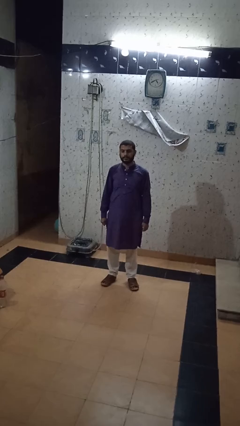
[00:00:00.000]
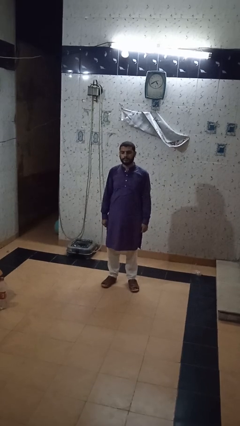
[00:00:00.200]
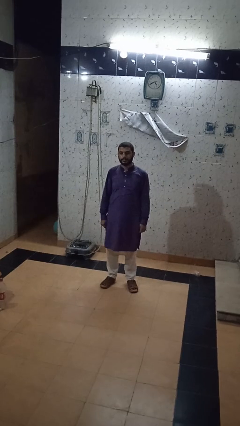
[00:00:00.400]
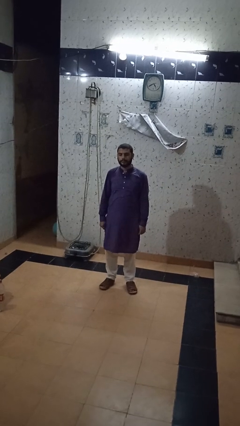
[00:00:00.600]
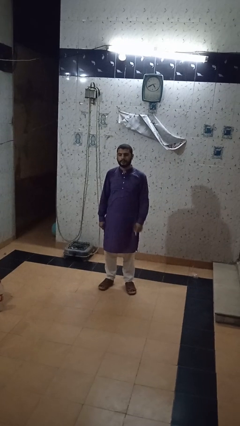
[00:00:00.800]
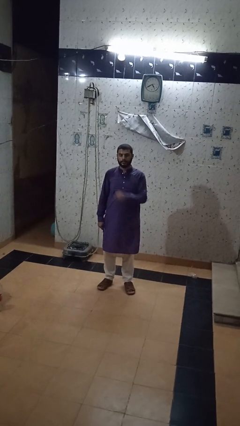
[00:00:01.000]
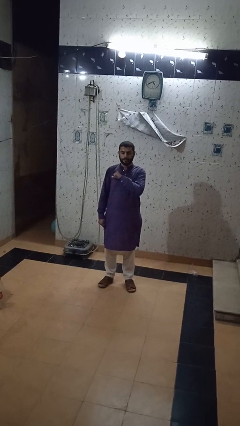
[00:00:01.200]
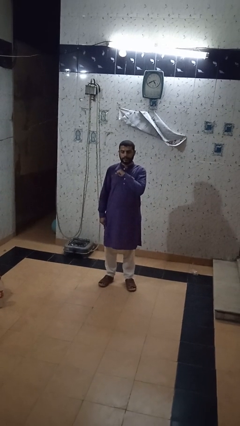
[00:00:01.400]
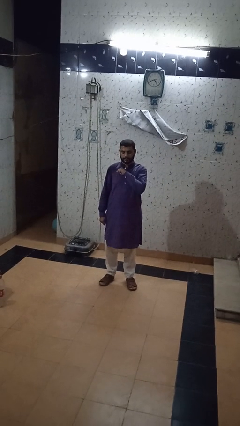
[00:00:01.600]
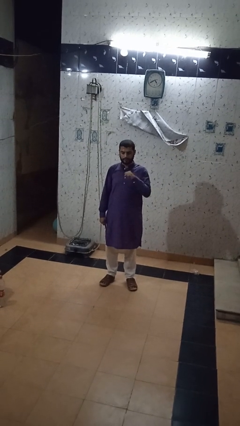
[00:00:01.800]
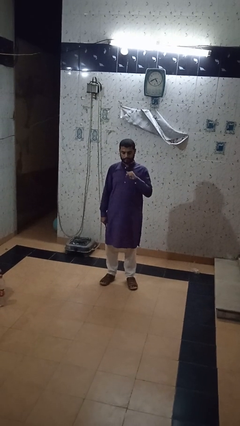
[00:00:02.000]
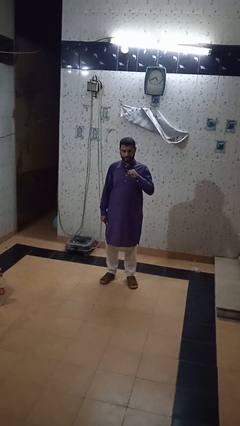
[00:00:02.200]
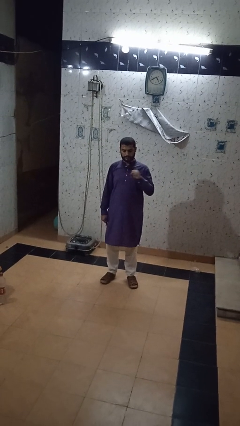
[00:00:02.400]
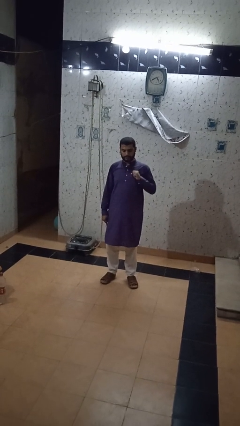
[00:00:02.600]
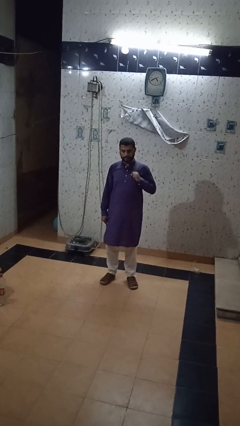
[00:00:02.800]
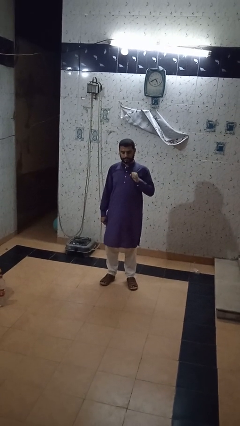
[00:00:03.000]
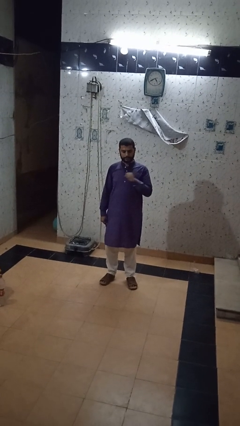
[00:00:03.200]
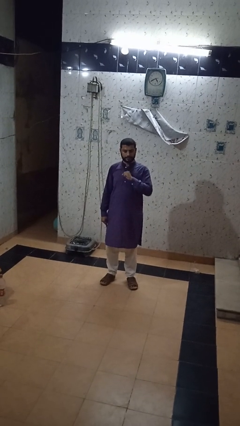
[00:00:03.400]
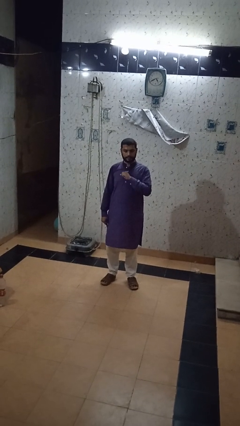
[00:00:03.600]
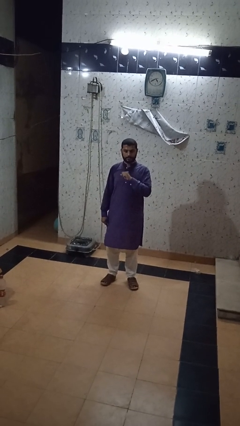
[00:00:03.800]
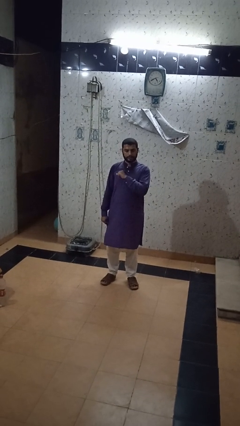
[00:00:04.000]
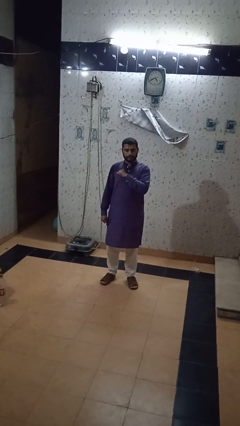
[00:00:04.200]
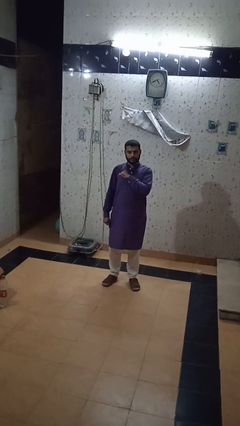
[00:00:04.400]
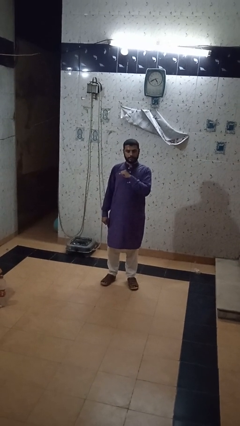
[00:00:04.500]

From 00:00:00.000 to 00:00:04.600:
person drums on chest

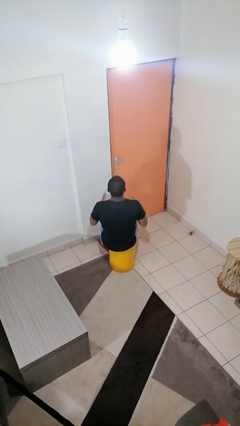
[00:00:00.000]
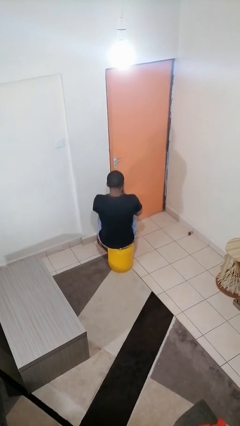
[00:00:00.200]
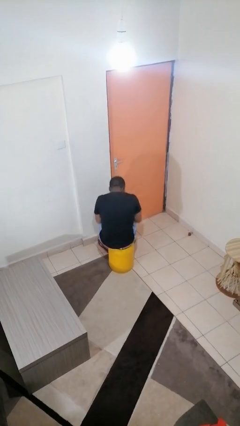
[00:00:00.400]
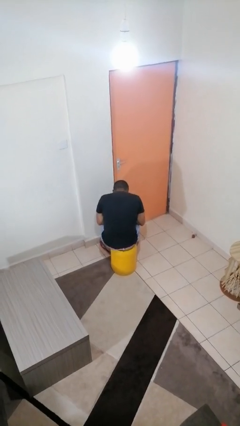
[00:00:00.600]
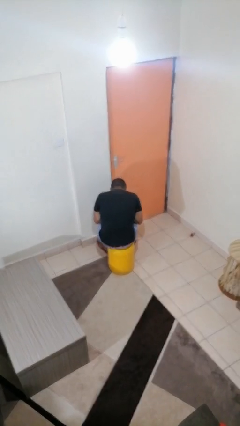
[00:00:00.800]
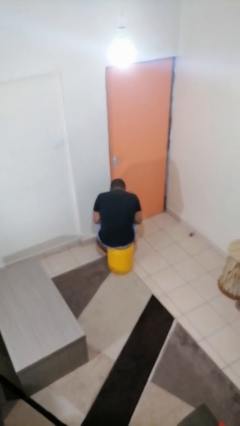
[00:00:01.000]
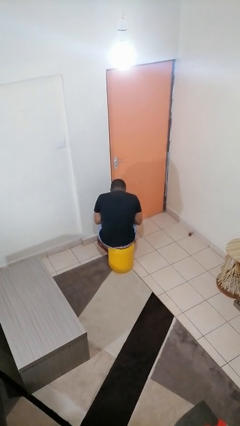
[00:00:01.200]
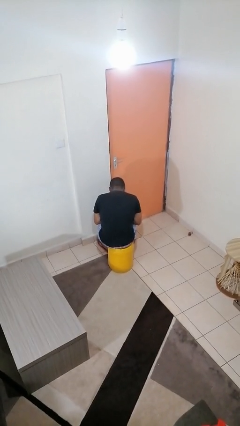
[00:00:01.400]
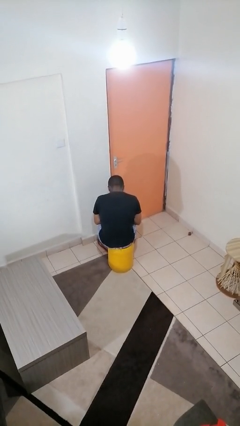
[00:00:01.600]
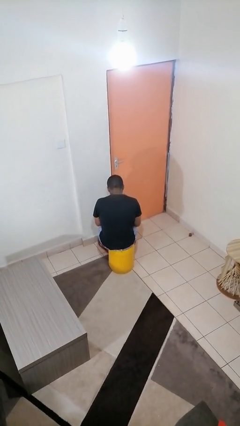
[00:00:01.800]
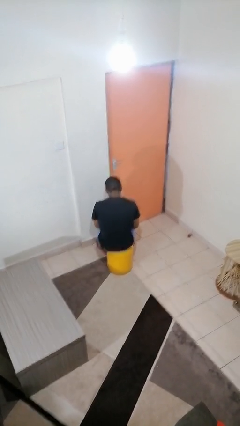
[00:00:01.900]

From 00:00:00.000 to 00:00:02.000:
person sneezes into hand

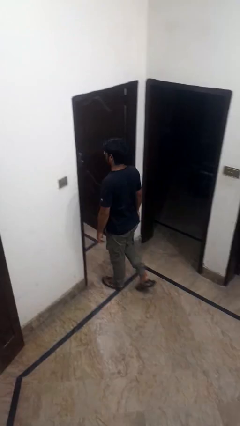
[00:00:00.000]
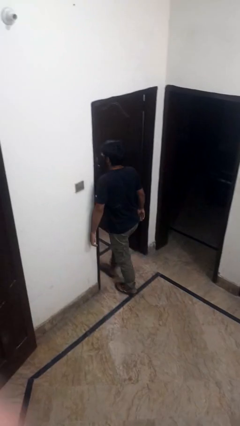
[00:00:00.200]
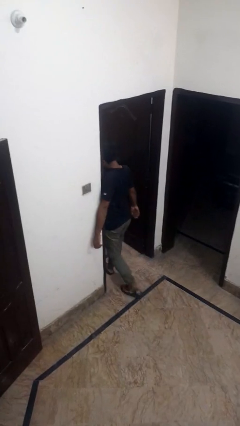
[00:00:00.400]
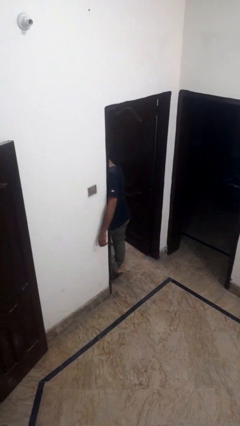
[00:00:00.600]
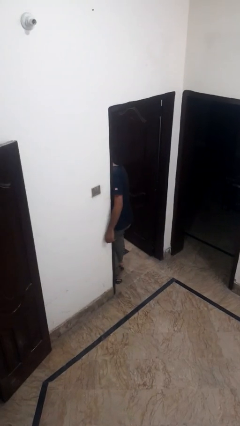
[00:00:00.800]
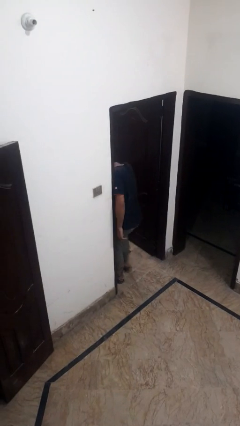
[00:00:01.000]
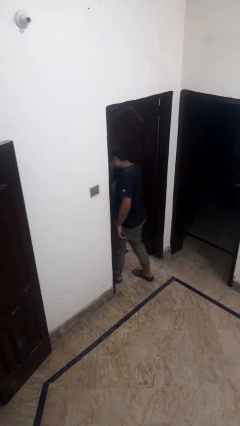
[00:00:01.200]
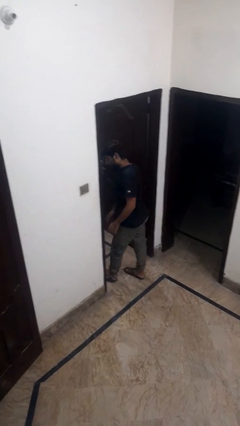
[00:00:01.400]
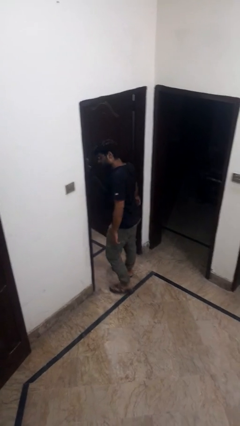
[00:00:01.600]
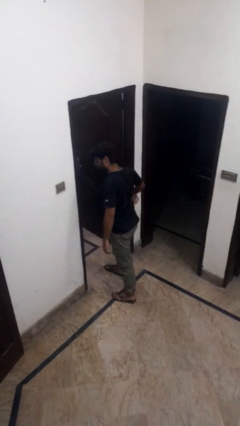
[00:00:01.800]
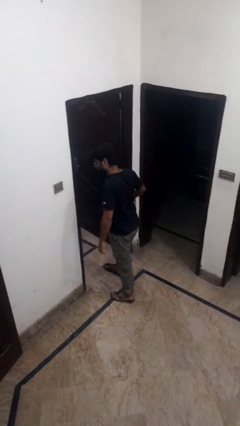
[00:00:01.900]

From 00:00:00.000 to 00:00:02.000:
person bumps into wall

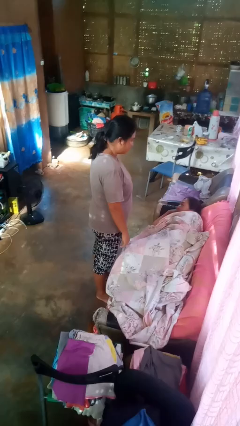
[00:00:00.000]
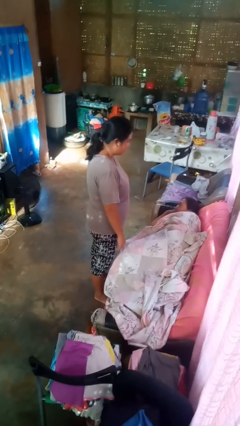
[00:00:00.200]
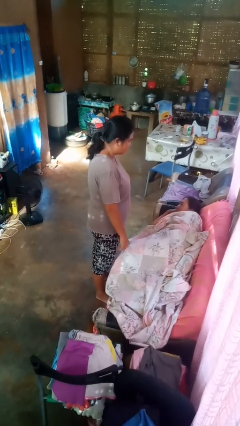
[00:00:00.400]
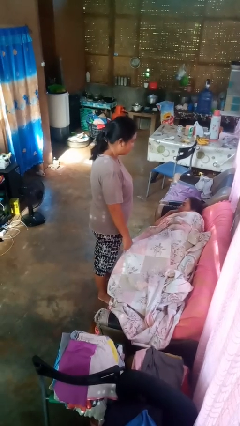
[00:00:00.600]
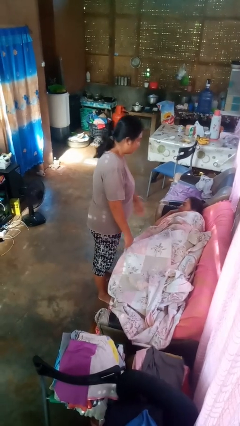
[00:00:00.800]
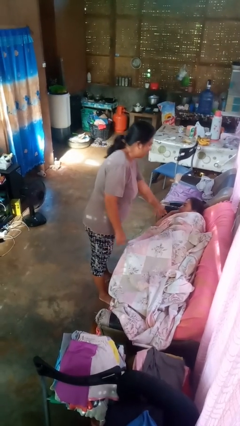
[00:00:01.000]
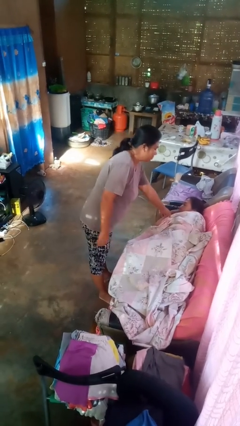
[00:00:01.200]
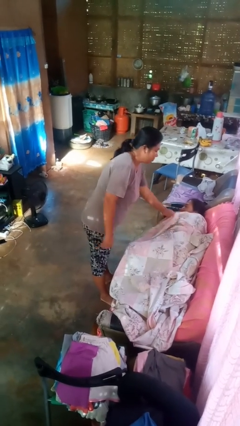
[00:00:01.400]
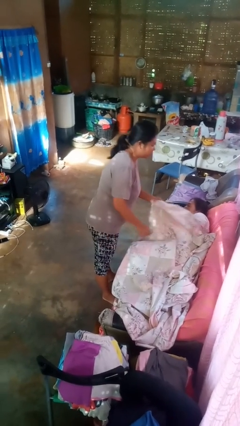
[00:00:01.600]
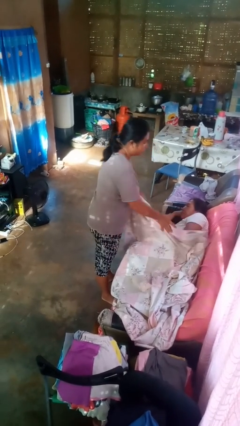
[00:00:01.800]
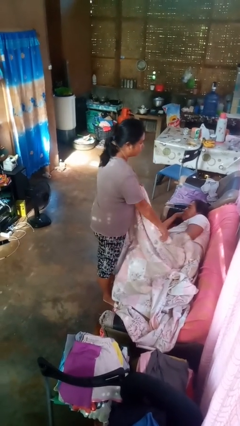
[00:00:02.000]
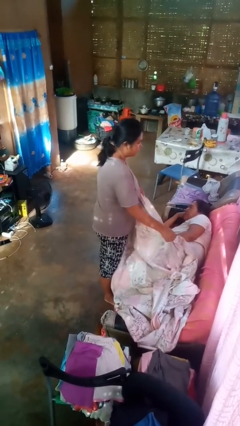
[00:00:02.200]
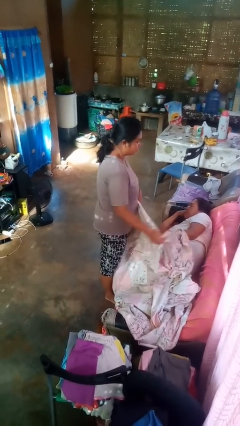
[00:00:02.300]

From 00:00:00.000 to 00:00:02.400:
person uncovers friend with blanket

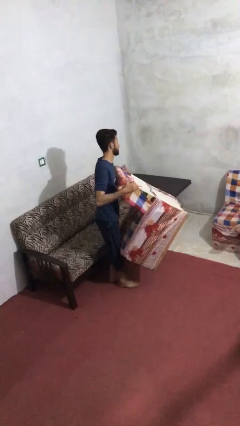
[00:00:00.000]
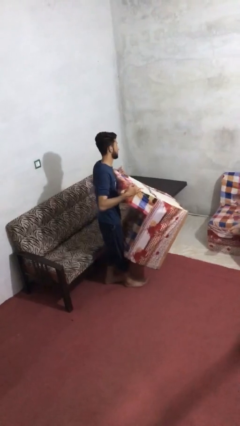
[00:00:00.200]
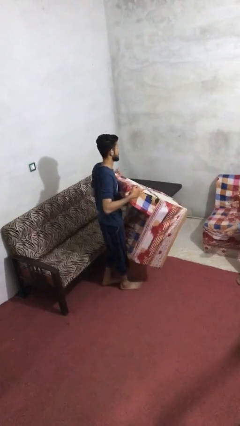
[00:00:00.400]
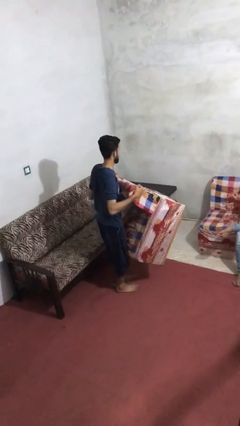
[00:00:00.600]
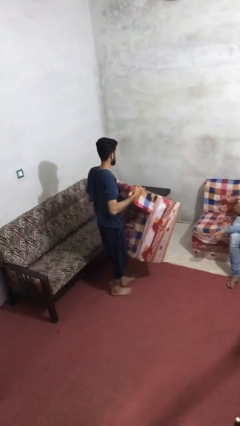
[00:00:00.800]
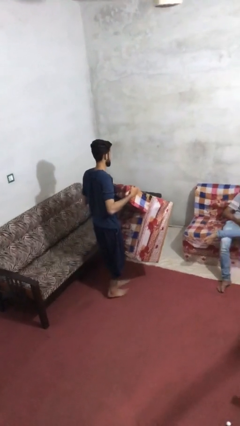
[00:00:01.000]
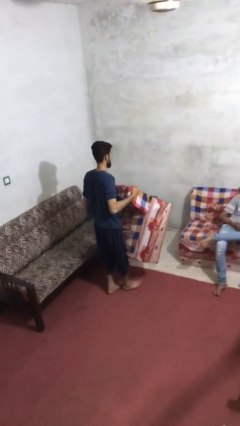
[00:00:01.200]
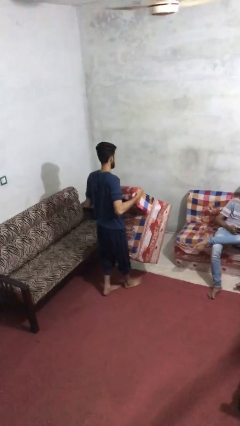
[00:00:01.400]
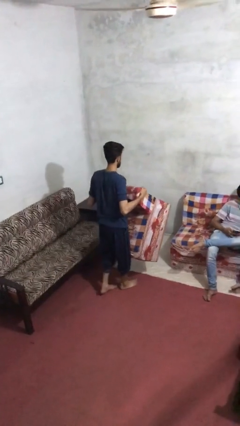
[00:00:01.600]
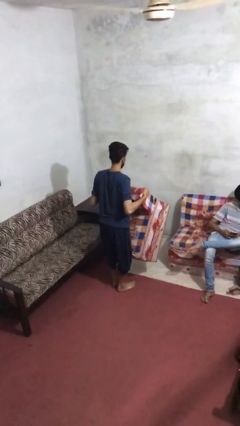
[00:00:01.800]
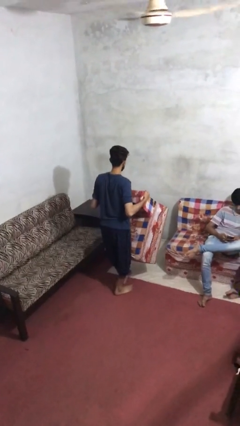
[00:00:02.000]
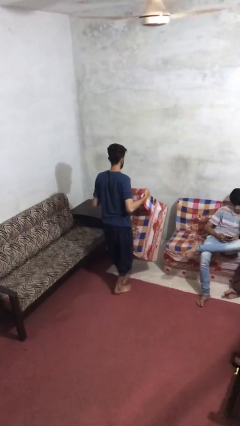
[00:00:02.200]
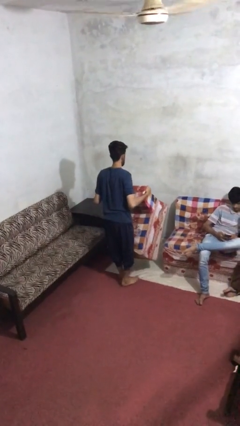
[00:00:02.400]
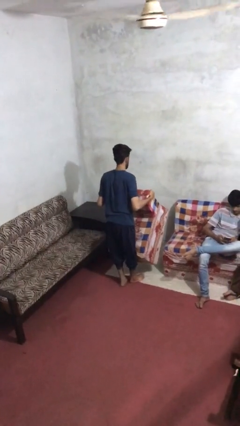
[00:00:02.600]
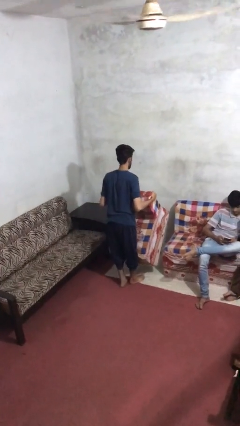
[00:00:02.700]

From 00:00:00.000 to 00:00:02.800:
person carries heavy object

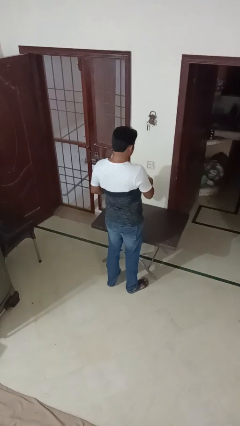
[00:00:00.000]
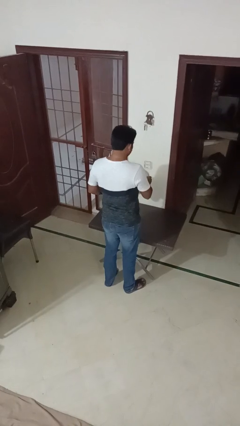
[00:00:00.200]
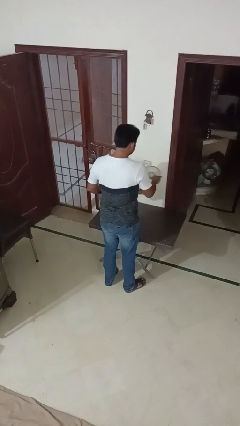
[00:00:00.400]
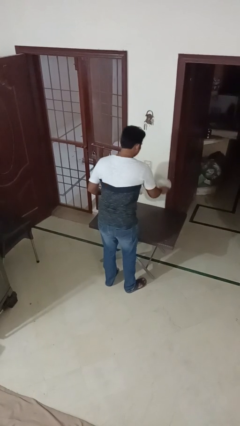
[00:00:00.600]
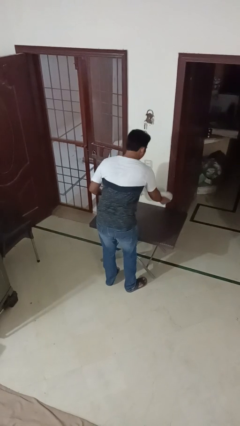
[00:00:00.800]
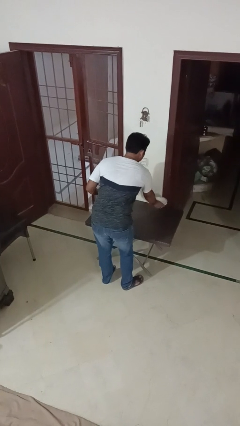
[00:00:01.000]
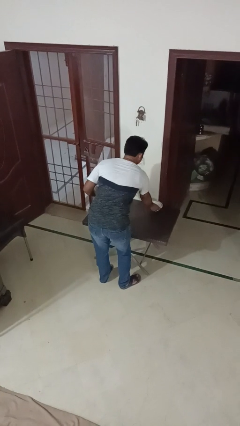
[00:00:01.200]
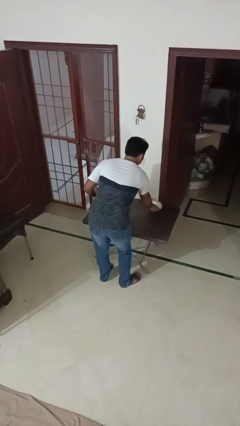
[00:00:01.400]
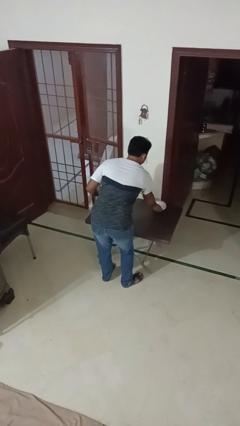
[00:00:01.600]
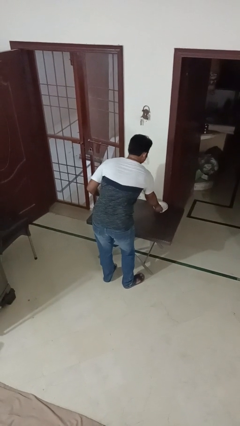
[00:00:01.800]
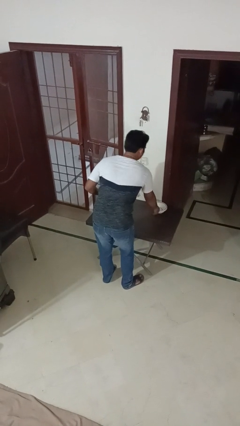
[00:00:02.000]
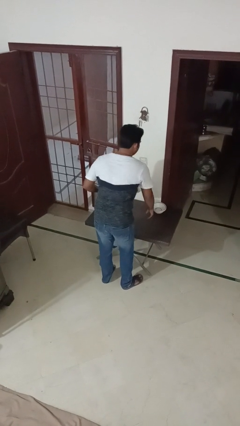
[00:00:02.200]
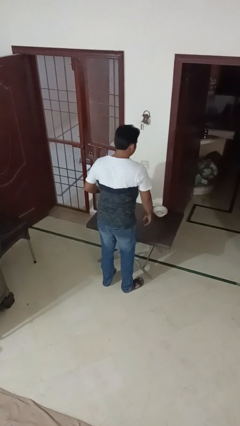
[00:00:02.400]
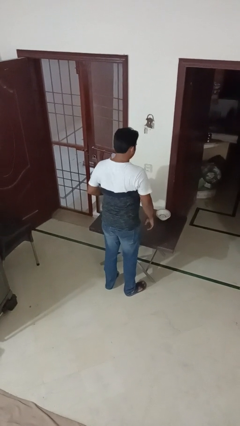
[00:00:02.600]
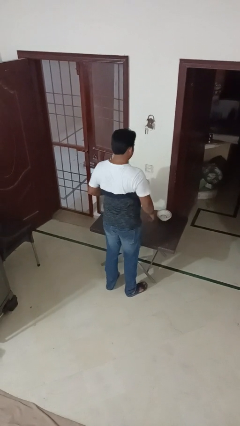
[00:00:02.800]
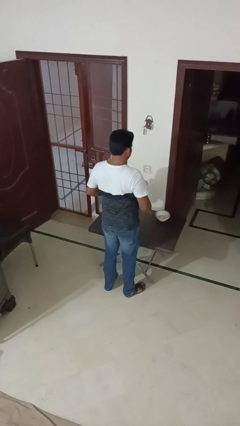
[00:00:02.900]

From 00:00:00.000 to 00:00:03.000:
person sets table

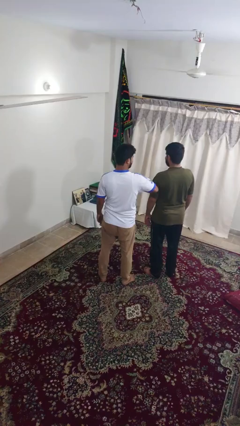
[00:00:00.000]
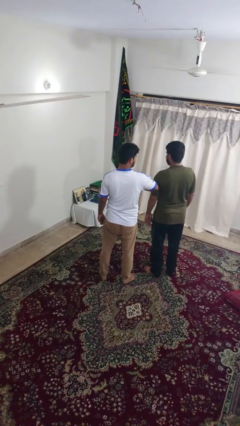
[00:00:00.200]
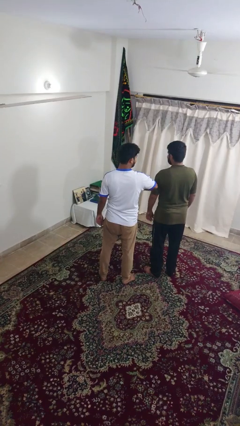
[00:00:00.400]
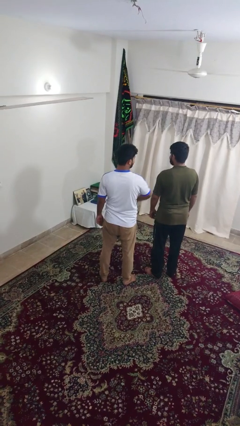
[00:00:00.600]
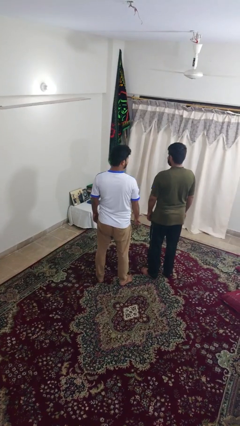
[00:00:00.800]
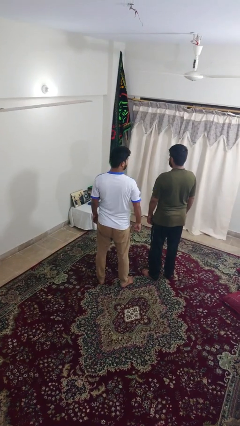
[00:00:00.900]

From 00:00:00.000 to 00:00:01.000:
person nudges person with elbow
